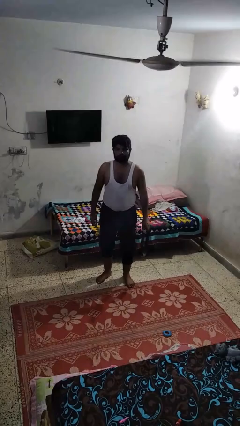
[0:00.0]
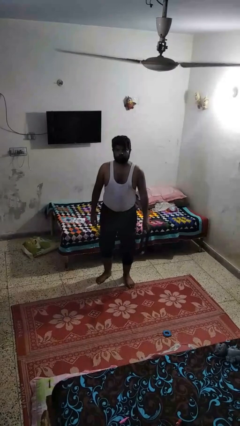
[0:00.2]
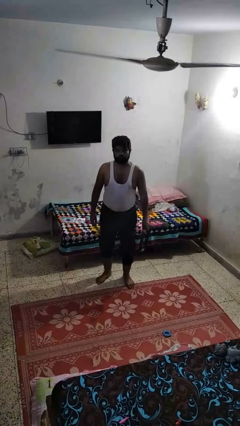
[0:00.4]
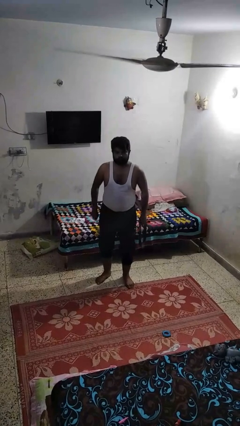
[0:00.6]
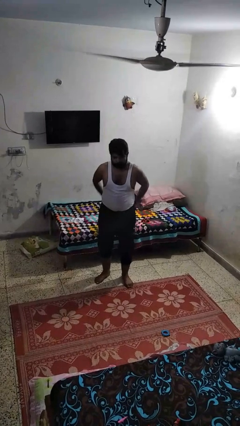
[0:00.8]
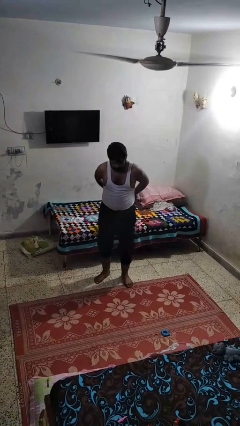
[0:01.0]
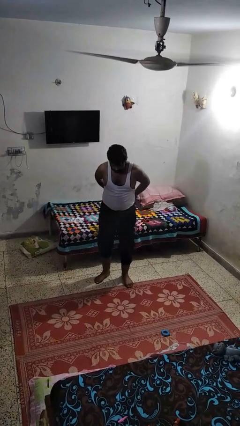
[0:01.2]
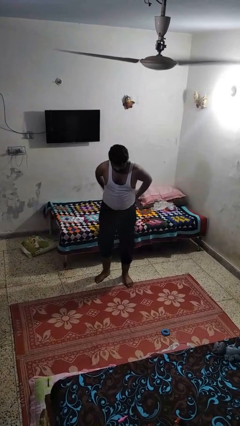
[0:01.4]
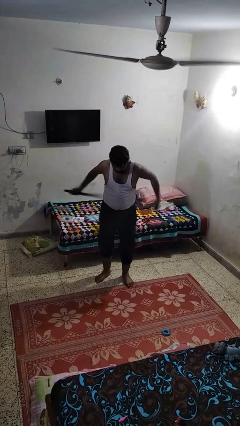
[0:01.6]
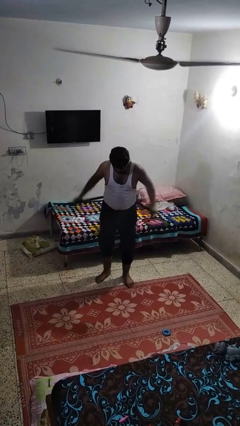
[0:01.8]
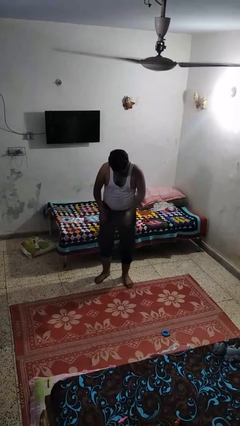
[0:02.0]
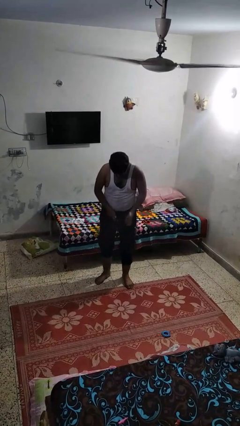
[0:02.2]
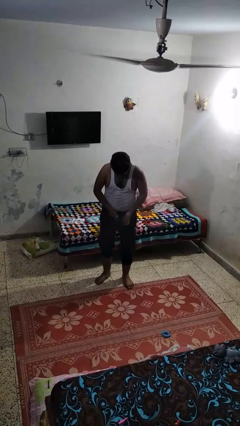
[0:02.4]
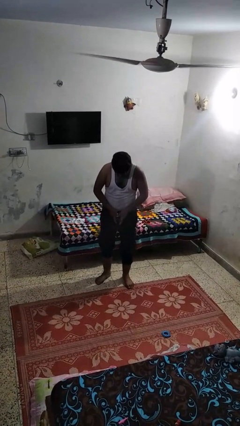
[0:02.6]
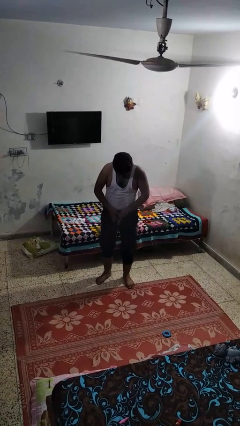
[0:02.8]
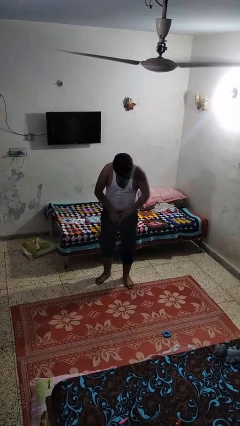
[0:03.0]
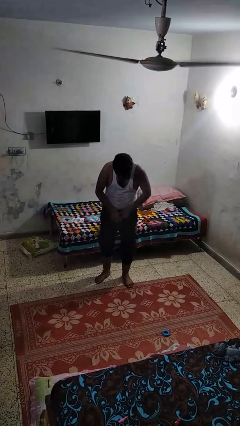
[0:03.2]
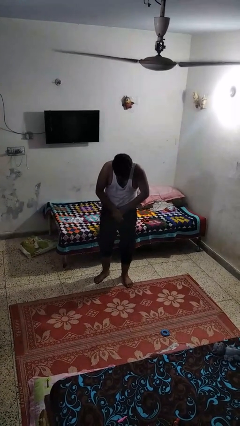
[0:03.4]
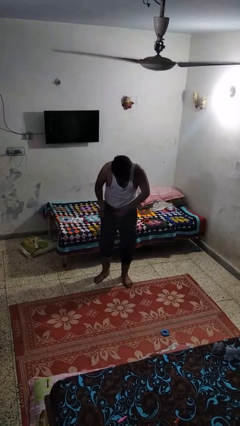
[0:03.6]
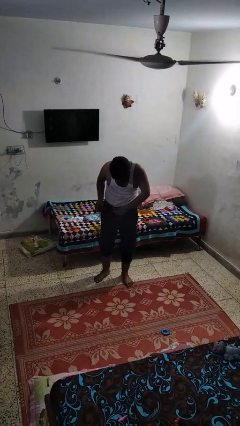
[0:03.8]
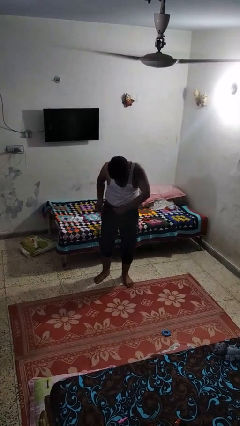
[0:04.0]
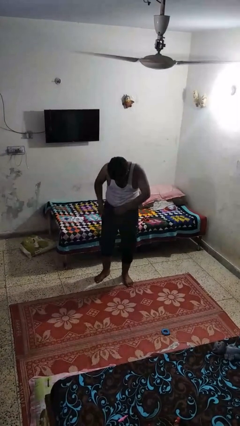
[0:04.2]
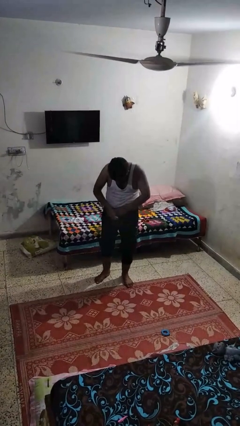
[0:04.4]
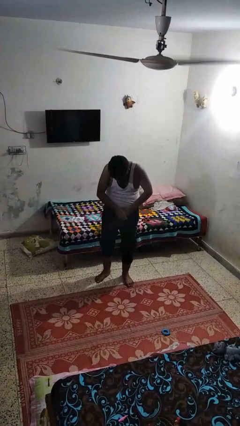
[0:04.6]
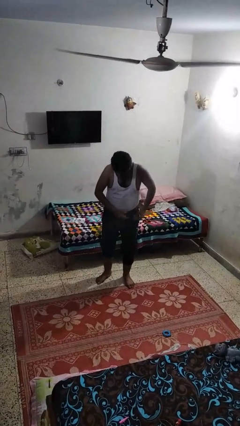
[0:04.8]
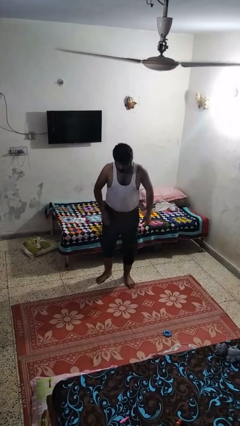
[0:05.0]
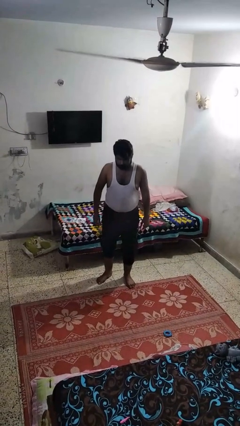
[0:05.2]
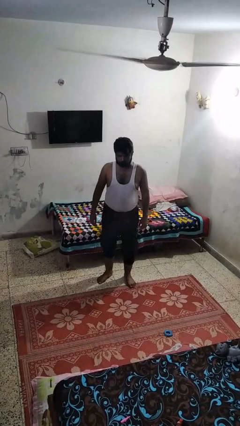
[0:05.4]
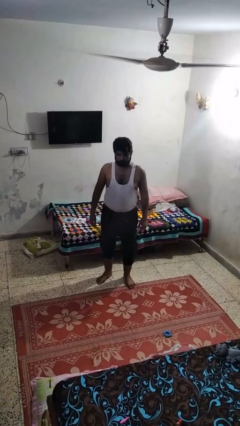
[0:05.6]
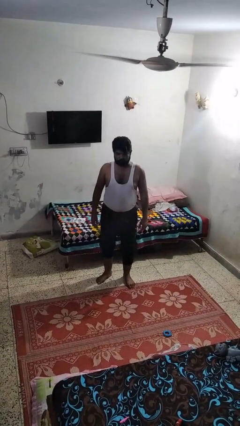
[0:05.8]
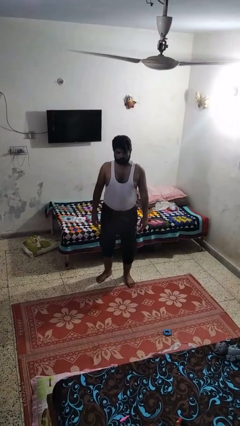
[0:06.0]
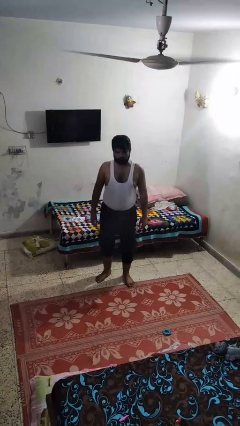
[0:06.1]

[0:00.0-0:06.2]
person puts on belt

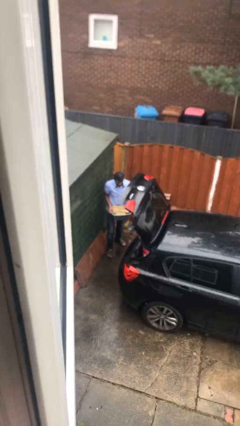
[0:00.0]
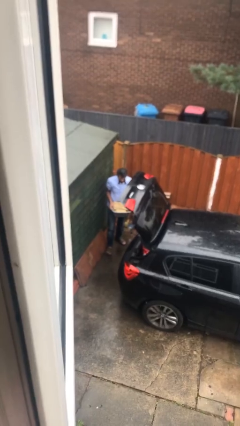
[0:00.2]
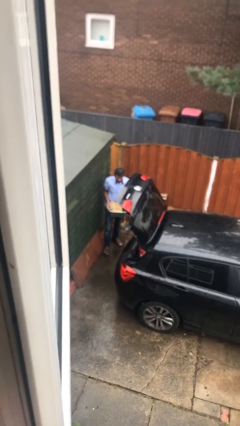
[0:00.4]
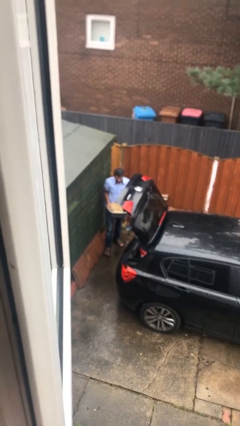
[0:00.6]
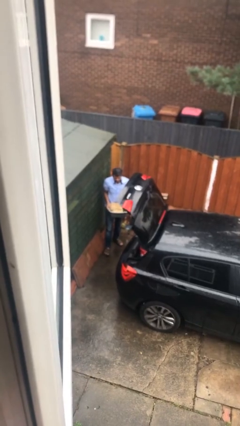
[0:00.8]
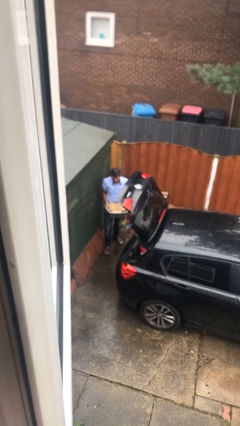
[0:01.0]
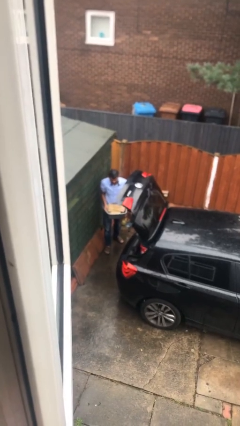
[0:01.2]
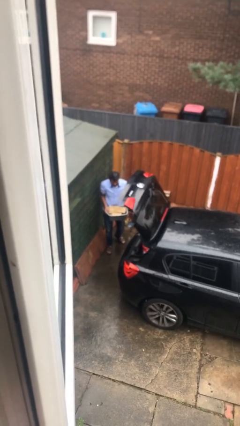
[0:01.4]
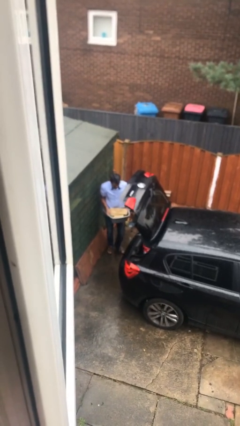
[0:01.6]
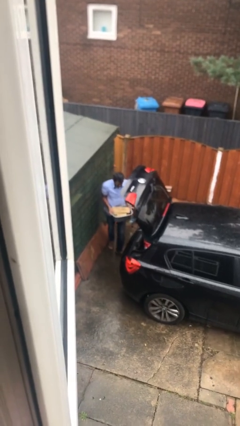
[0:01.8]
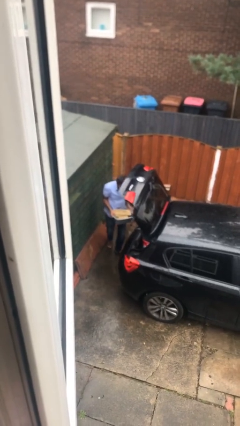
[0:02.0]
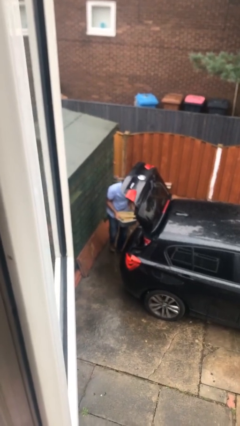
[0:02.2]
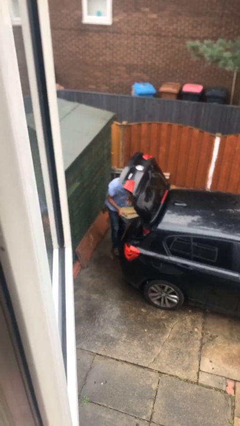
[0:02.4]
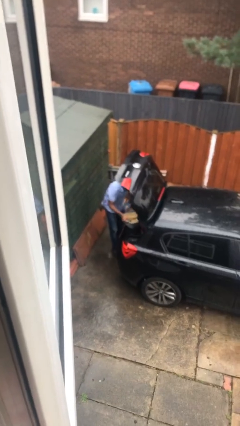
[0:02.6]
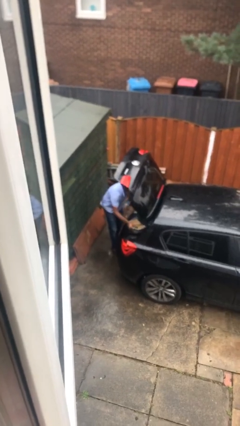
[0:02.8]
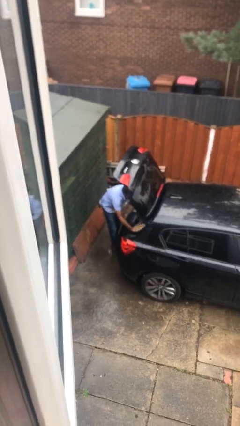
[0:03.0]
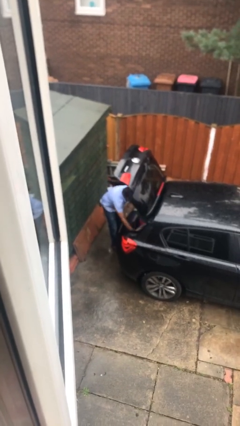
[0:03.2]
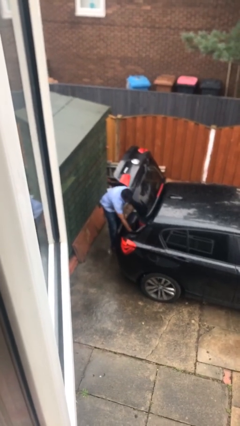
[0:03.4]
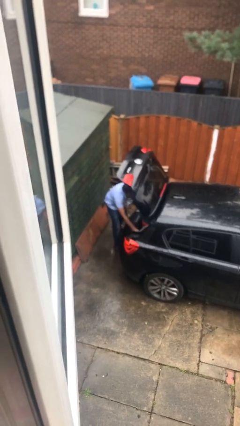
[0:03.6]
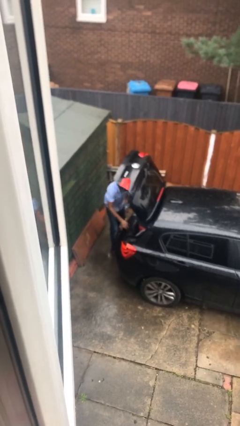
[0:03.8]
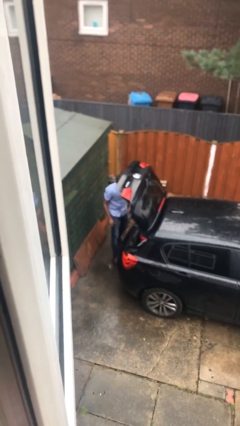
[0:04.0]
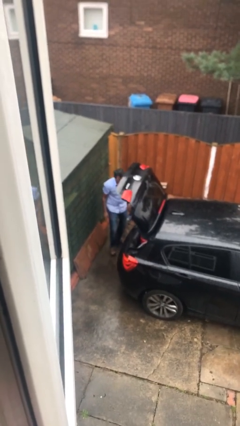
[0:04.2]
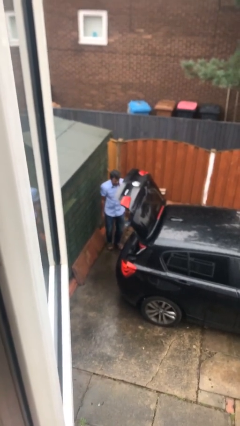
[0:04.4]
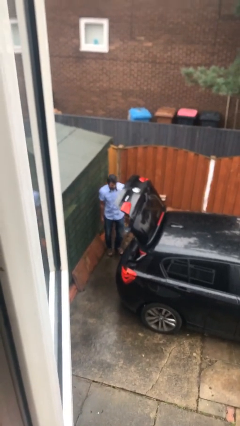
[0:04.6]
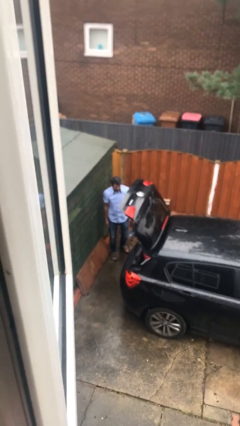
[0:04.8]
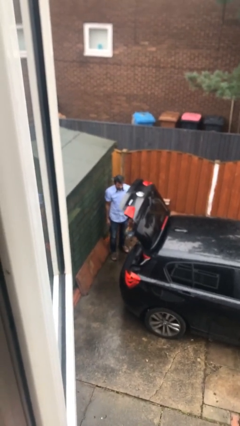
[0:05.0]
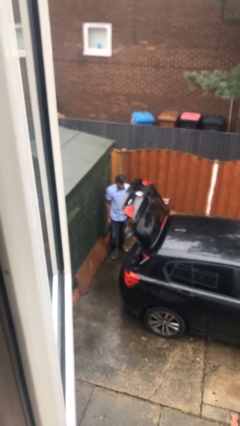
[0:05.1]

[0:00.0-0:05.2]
person loads car

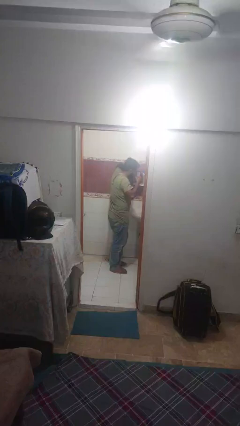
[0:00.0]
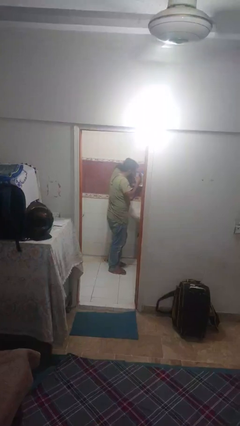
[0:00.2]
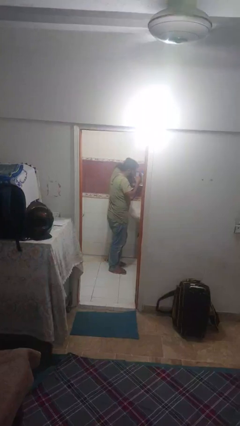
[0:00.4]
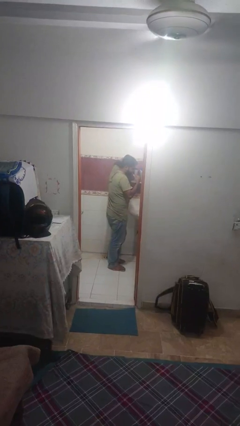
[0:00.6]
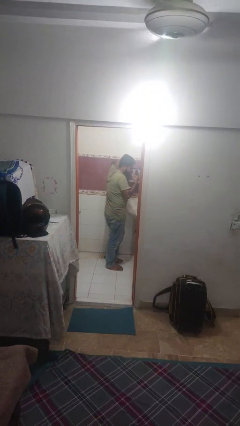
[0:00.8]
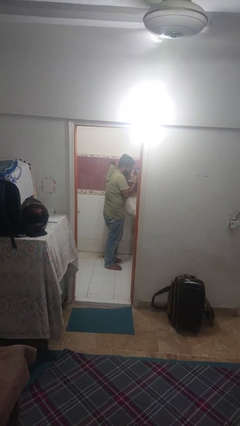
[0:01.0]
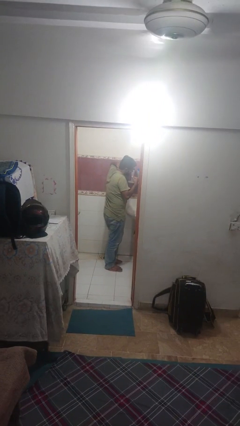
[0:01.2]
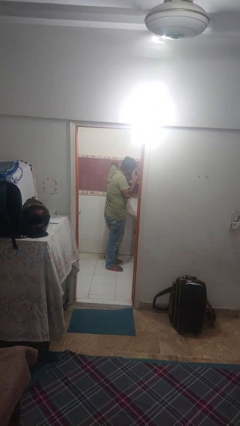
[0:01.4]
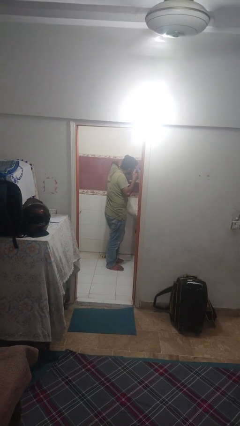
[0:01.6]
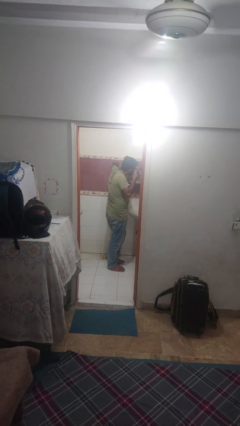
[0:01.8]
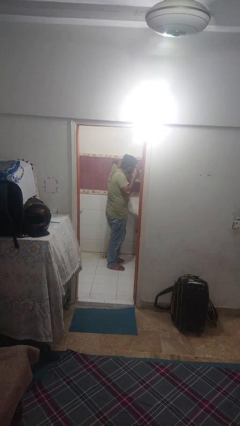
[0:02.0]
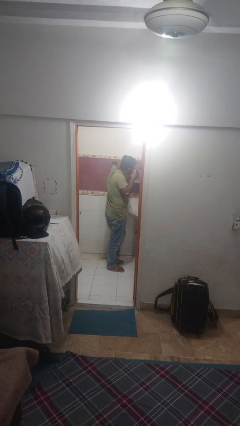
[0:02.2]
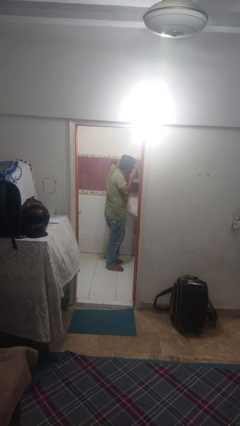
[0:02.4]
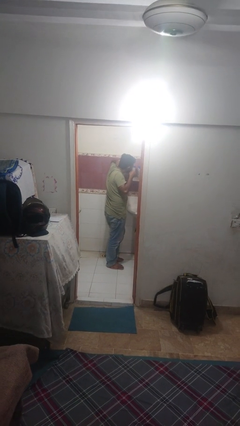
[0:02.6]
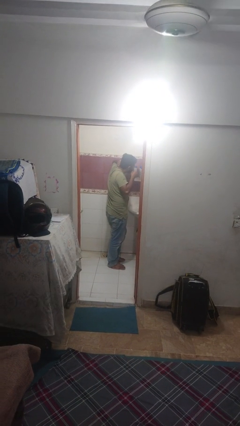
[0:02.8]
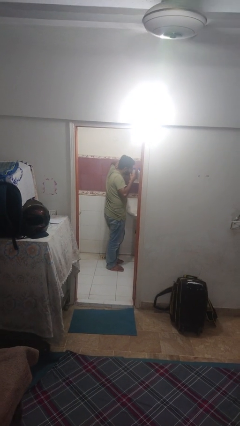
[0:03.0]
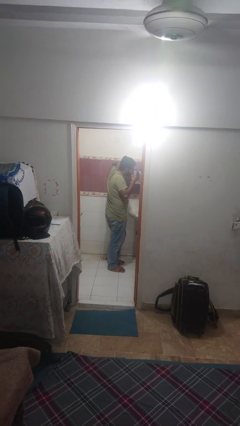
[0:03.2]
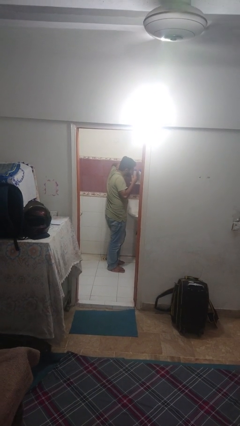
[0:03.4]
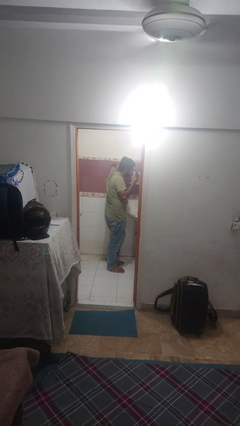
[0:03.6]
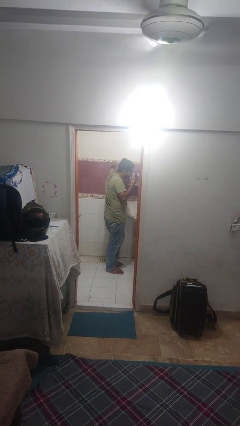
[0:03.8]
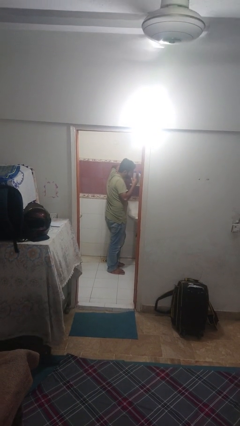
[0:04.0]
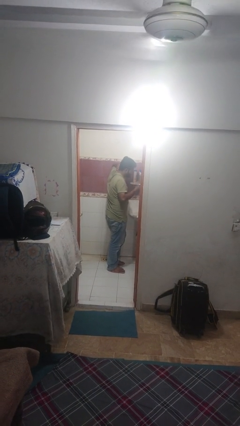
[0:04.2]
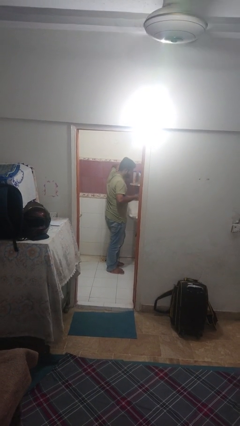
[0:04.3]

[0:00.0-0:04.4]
person brushes teeth

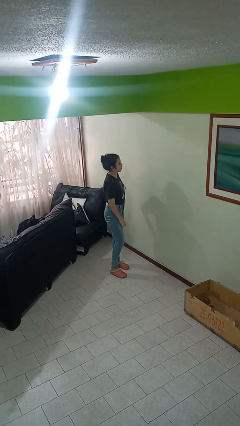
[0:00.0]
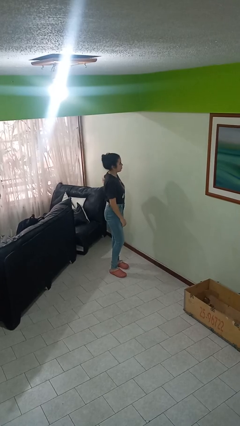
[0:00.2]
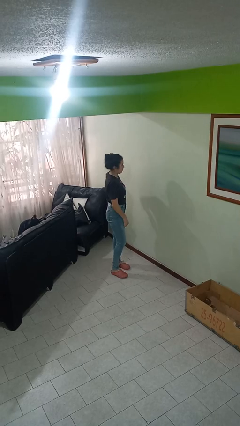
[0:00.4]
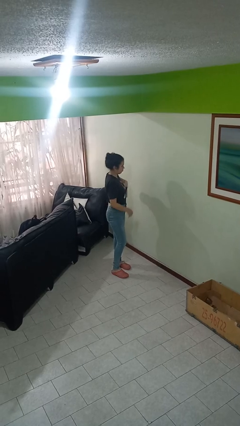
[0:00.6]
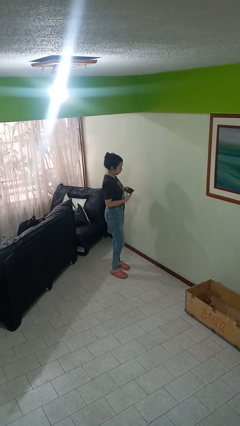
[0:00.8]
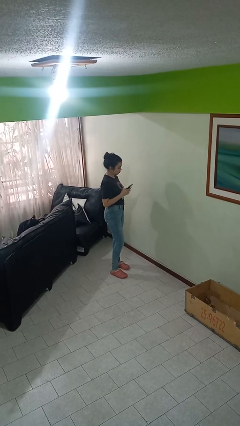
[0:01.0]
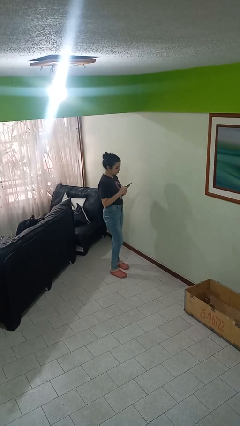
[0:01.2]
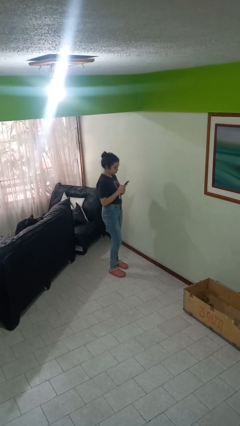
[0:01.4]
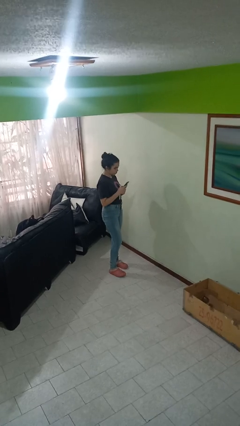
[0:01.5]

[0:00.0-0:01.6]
person takes phone from pocket

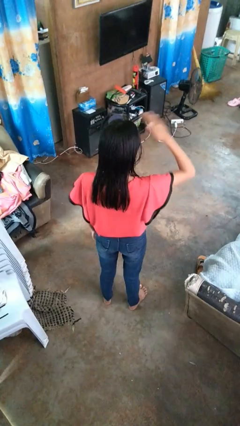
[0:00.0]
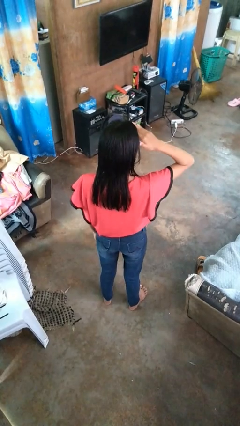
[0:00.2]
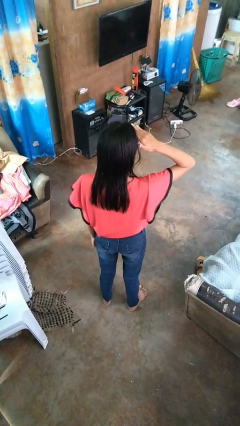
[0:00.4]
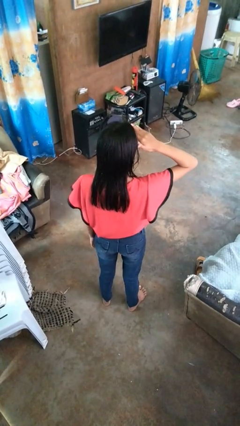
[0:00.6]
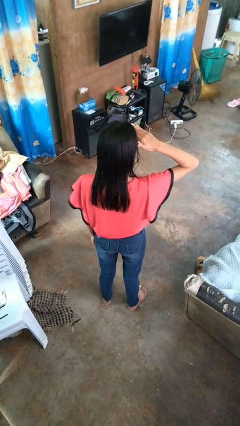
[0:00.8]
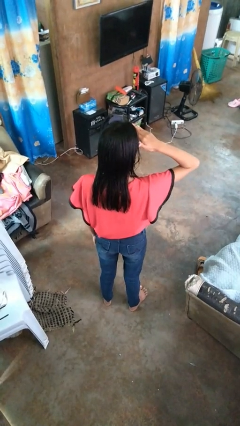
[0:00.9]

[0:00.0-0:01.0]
person salutes
